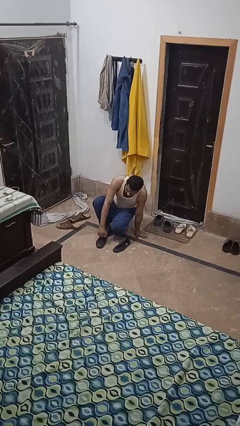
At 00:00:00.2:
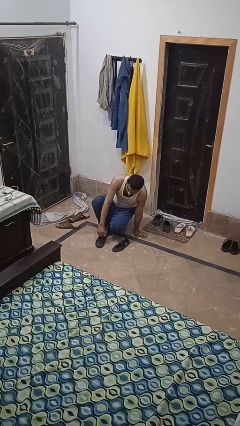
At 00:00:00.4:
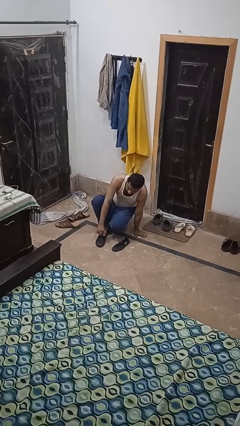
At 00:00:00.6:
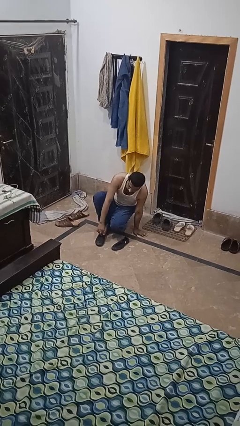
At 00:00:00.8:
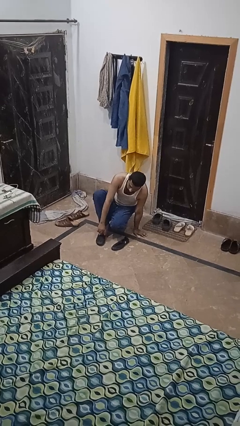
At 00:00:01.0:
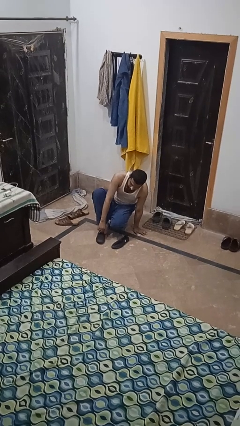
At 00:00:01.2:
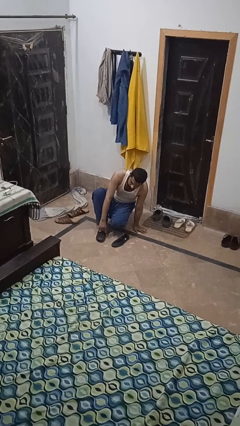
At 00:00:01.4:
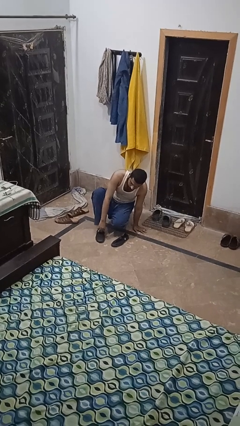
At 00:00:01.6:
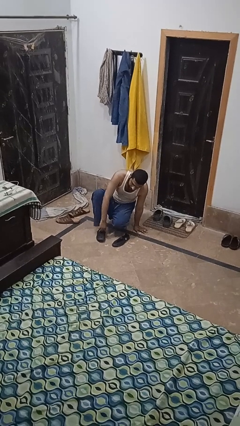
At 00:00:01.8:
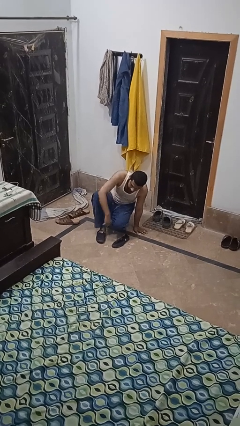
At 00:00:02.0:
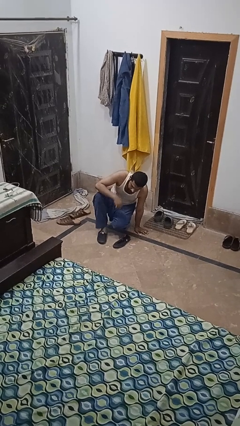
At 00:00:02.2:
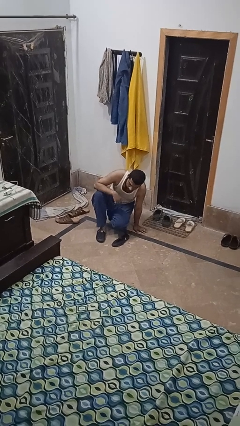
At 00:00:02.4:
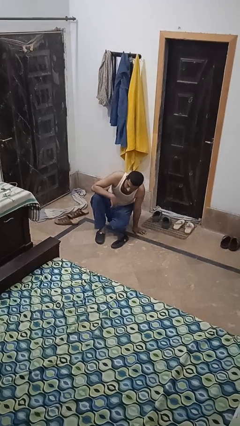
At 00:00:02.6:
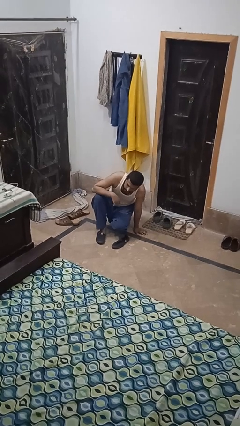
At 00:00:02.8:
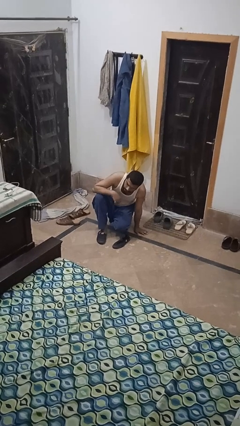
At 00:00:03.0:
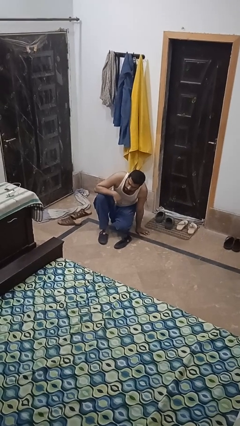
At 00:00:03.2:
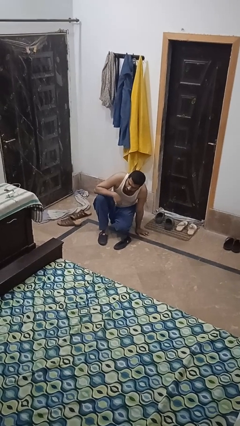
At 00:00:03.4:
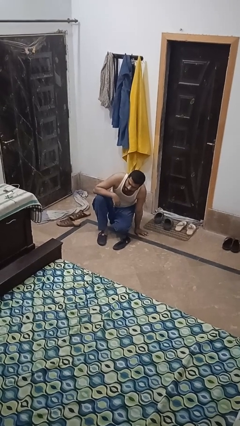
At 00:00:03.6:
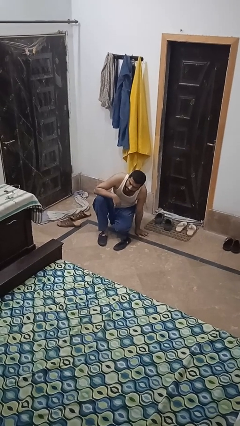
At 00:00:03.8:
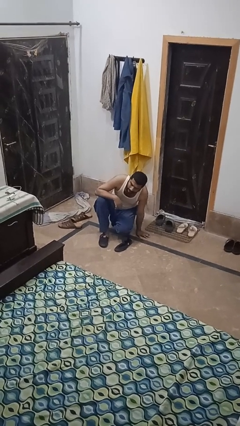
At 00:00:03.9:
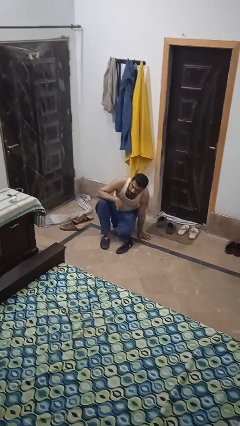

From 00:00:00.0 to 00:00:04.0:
person puts on shoes

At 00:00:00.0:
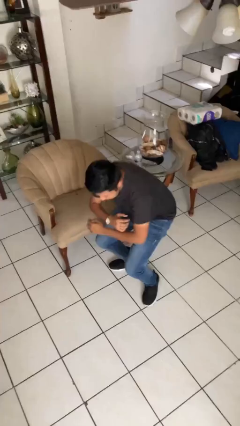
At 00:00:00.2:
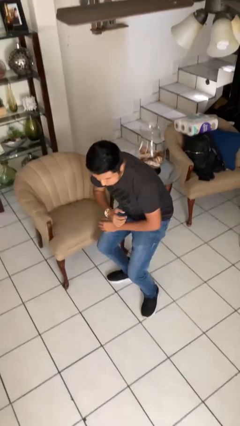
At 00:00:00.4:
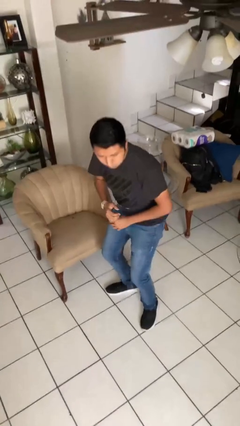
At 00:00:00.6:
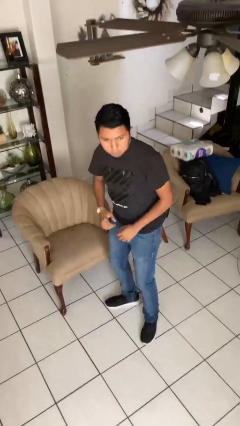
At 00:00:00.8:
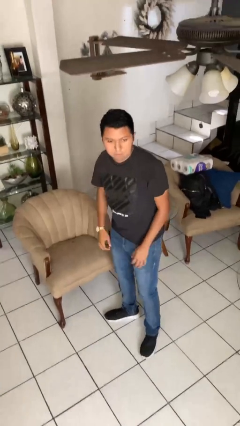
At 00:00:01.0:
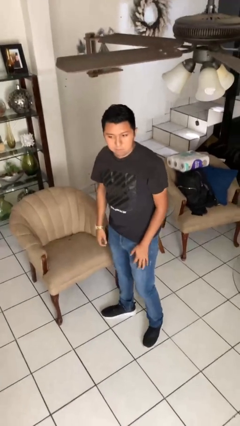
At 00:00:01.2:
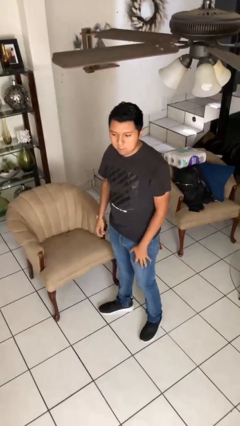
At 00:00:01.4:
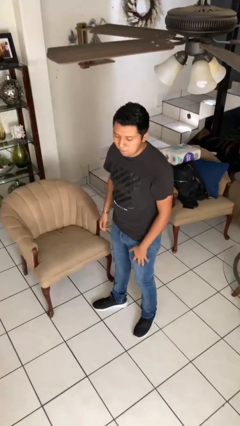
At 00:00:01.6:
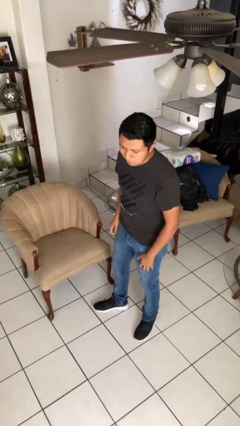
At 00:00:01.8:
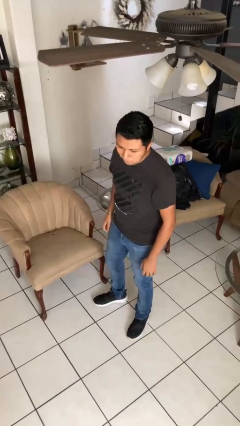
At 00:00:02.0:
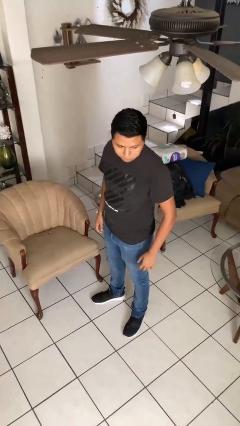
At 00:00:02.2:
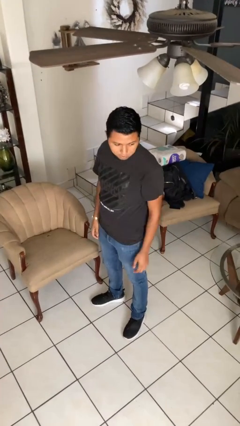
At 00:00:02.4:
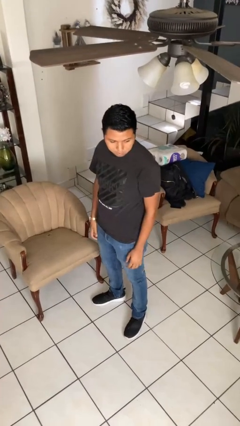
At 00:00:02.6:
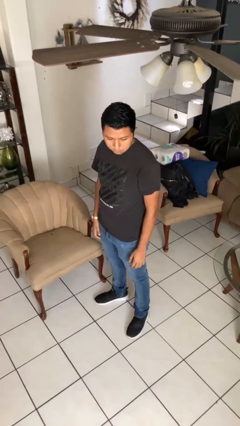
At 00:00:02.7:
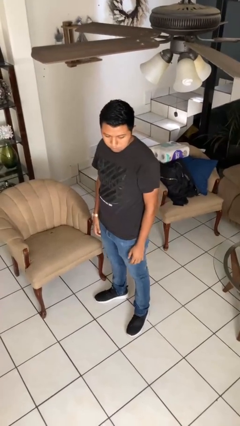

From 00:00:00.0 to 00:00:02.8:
person stands up

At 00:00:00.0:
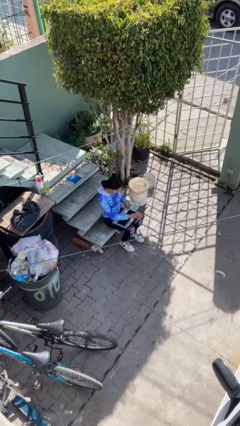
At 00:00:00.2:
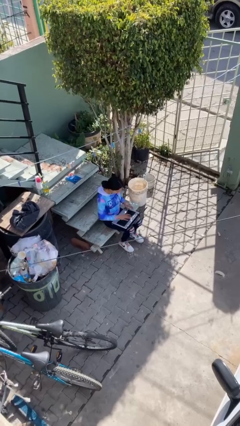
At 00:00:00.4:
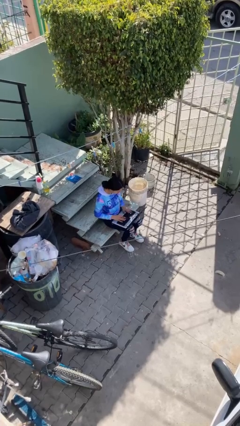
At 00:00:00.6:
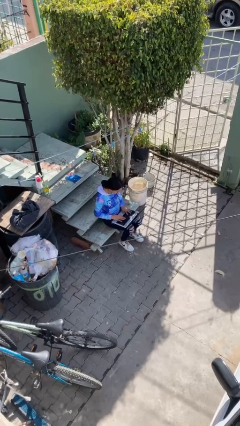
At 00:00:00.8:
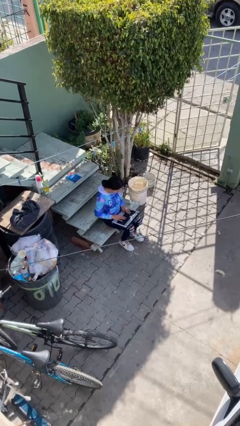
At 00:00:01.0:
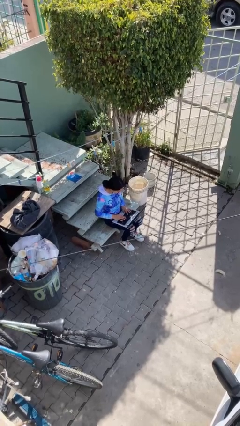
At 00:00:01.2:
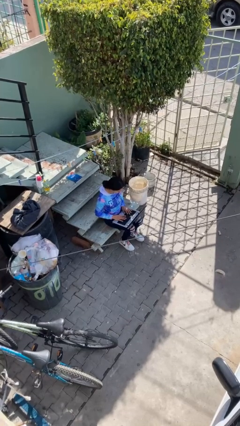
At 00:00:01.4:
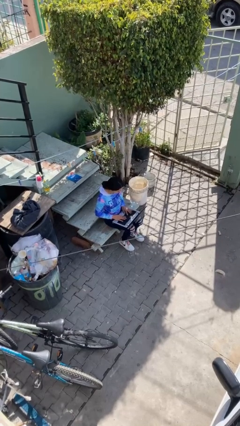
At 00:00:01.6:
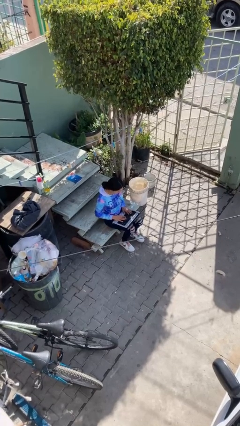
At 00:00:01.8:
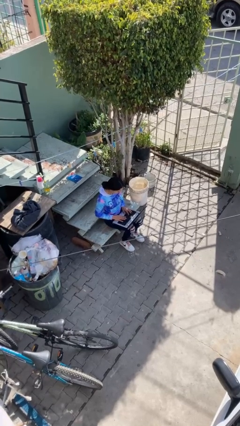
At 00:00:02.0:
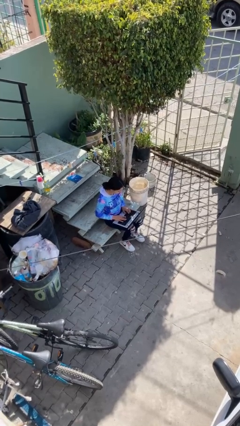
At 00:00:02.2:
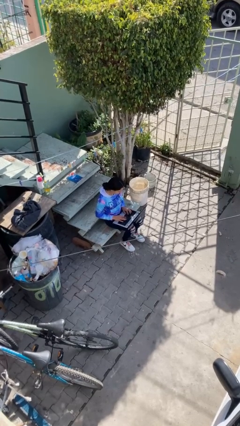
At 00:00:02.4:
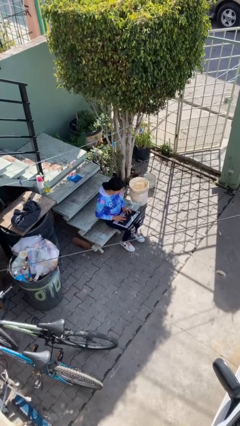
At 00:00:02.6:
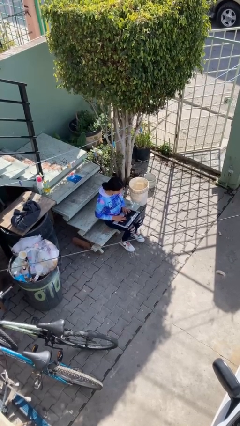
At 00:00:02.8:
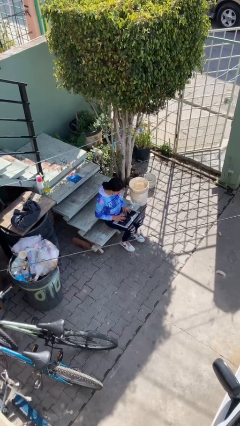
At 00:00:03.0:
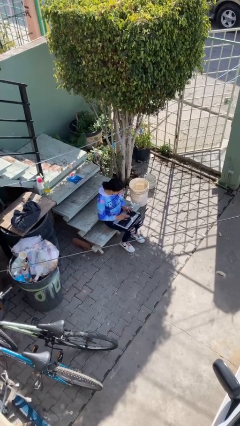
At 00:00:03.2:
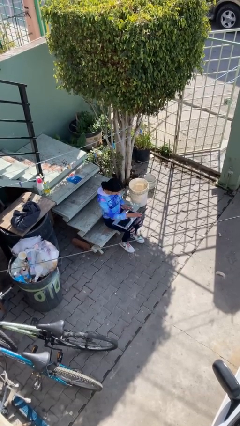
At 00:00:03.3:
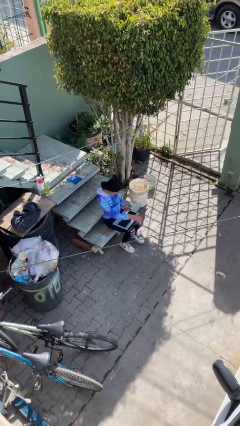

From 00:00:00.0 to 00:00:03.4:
person interacts with laptop

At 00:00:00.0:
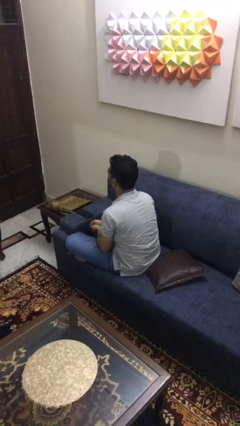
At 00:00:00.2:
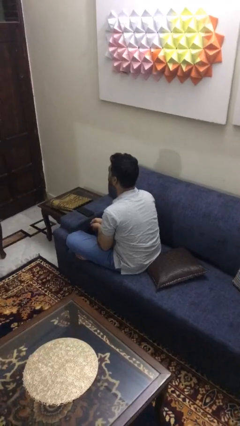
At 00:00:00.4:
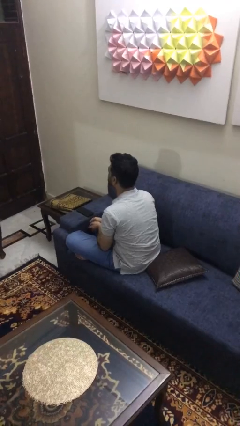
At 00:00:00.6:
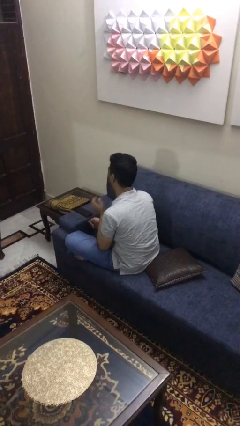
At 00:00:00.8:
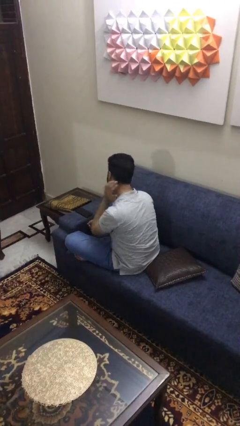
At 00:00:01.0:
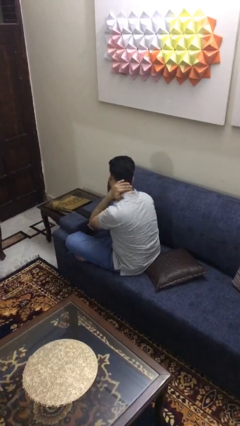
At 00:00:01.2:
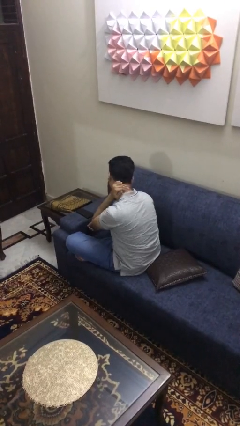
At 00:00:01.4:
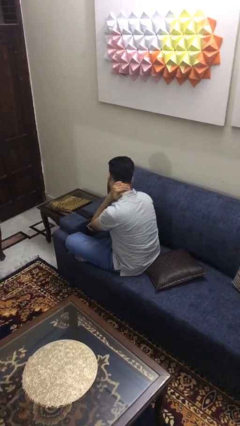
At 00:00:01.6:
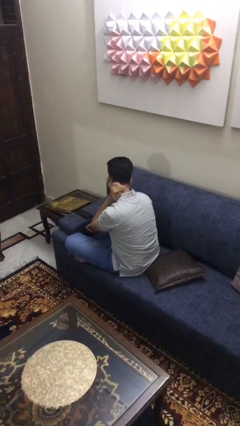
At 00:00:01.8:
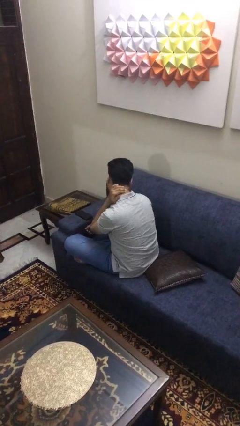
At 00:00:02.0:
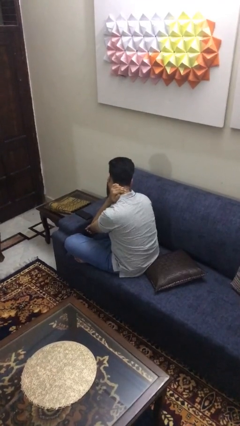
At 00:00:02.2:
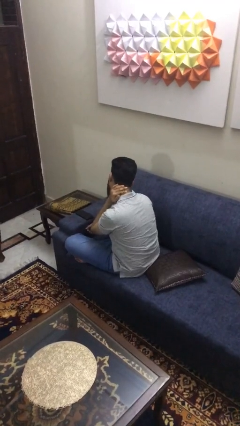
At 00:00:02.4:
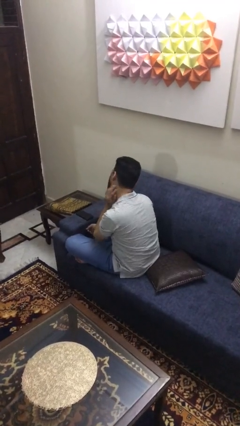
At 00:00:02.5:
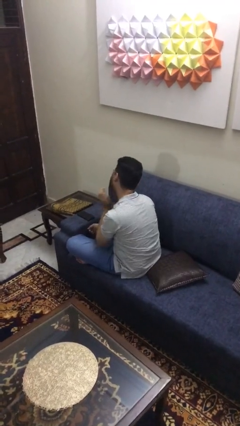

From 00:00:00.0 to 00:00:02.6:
person rubs neck

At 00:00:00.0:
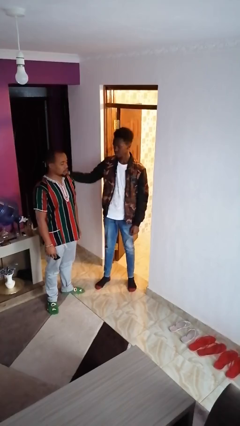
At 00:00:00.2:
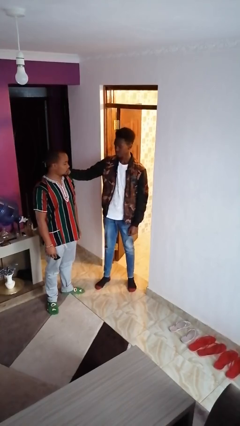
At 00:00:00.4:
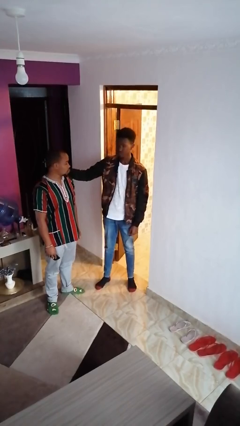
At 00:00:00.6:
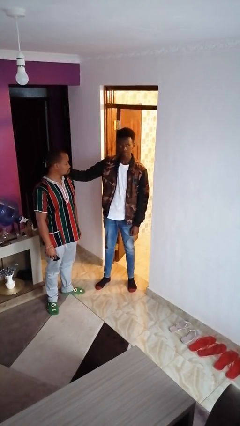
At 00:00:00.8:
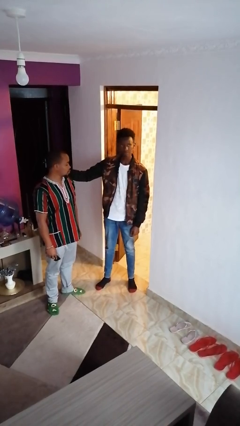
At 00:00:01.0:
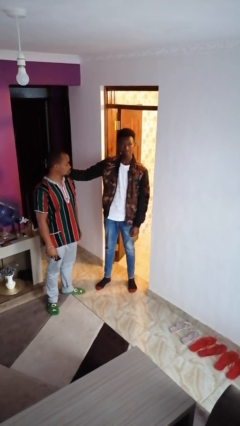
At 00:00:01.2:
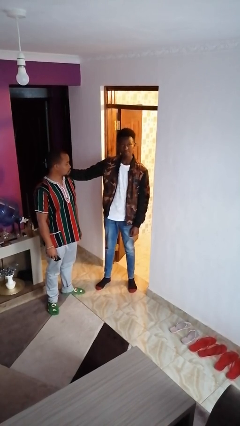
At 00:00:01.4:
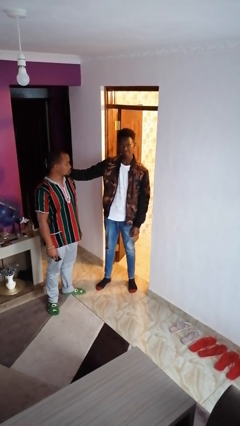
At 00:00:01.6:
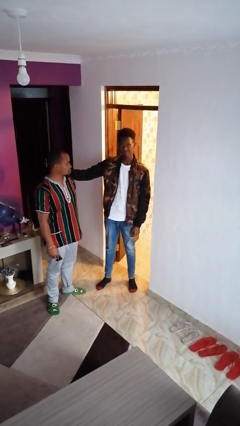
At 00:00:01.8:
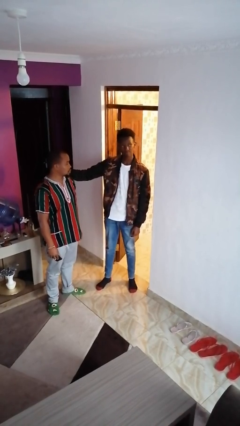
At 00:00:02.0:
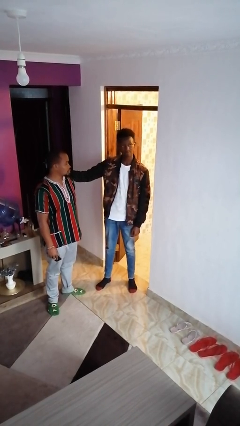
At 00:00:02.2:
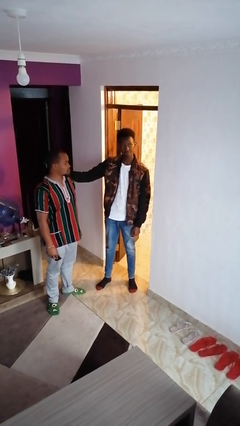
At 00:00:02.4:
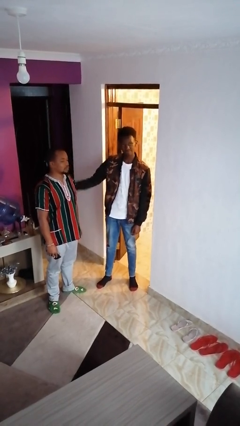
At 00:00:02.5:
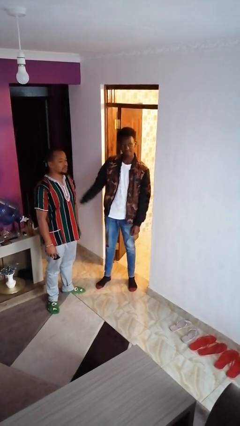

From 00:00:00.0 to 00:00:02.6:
person pounds shoulders of person

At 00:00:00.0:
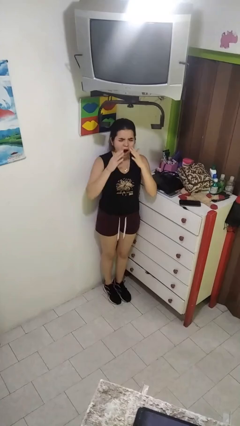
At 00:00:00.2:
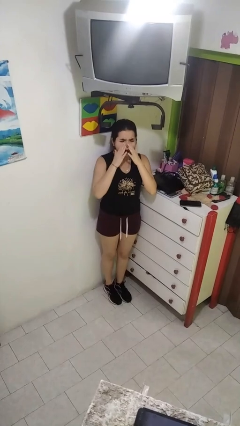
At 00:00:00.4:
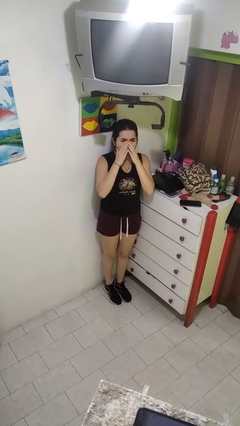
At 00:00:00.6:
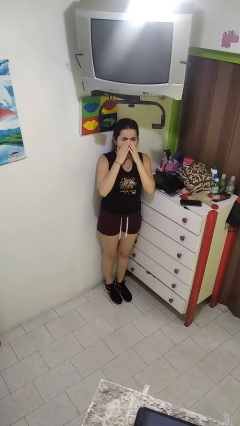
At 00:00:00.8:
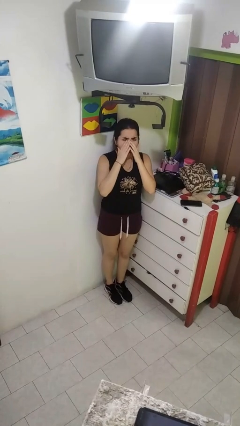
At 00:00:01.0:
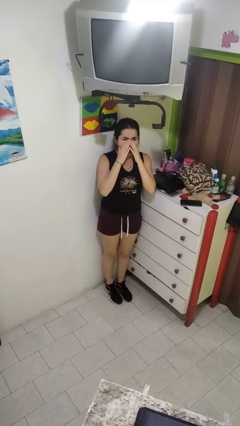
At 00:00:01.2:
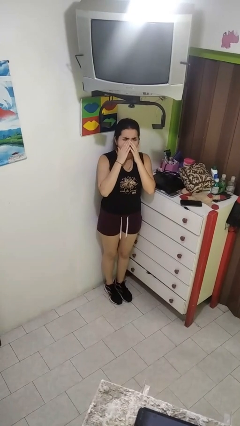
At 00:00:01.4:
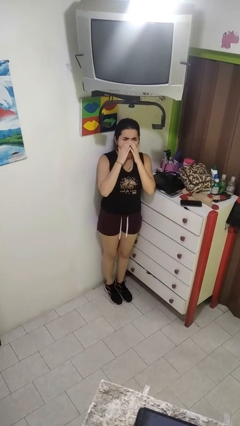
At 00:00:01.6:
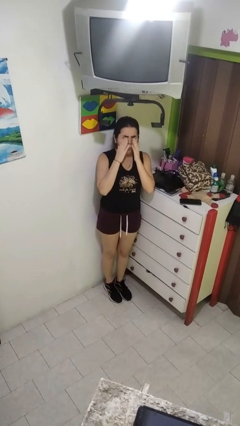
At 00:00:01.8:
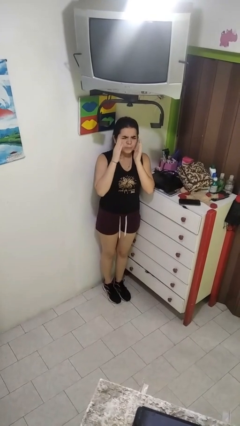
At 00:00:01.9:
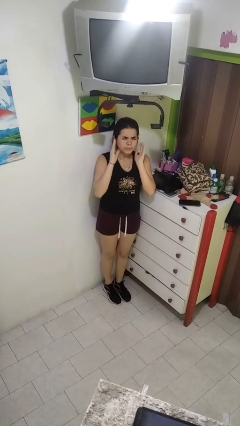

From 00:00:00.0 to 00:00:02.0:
person yawns
